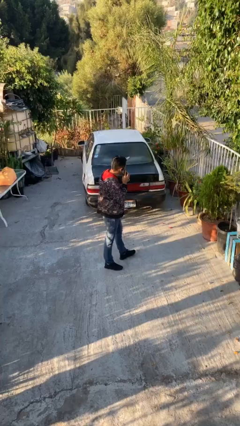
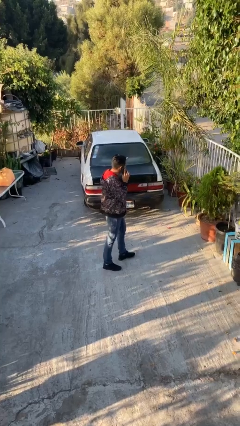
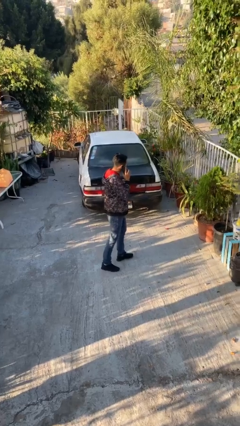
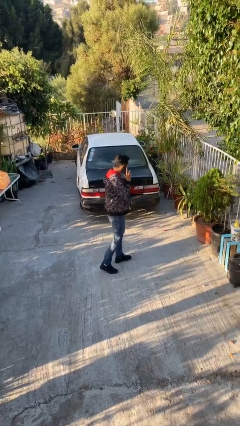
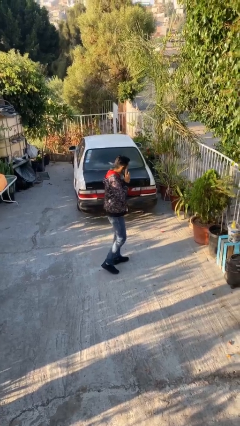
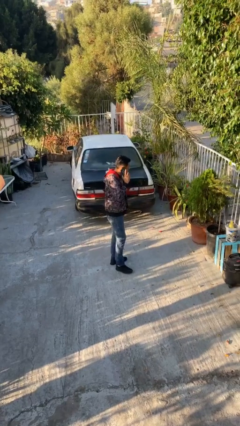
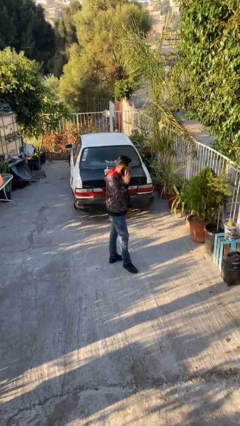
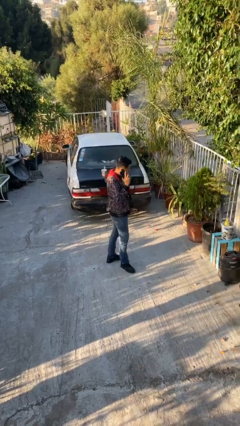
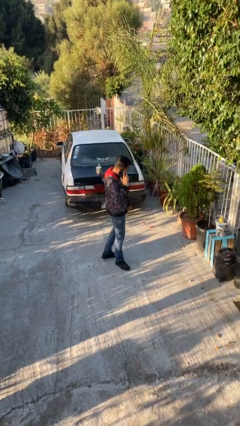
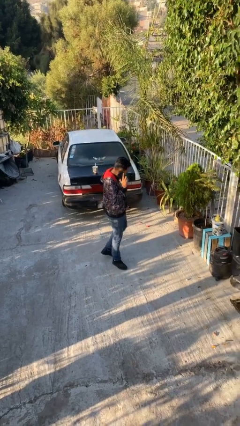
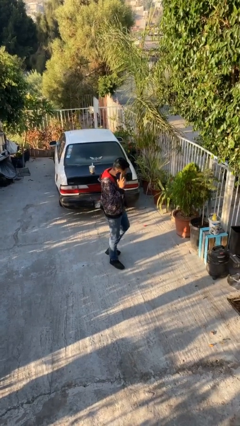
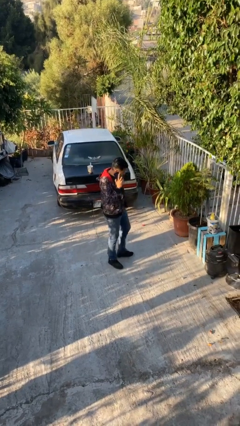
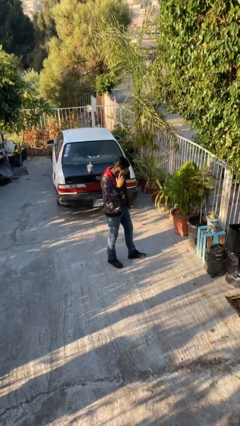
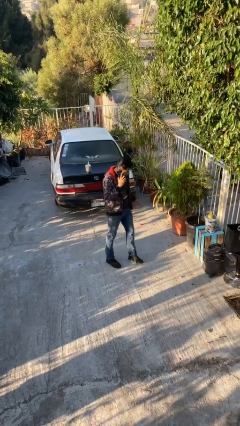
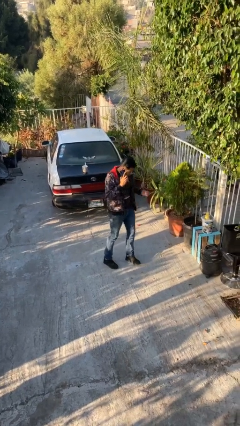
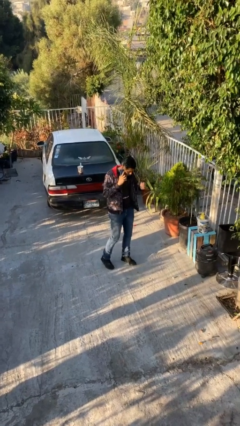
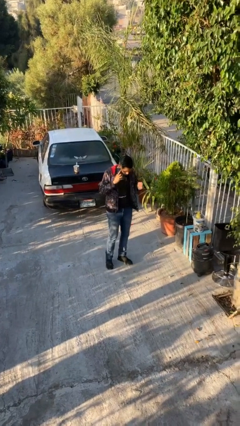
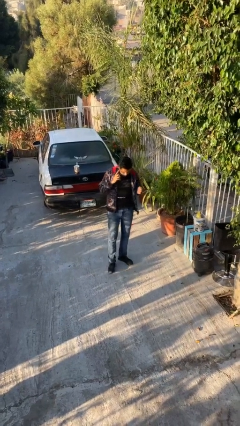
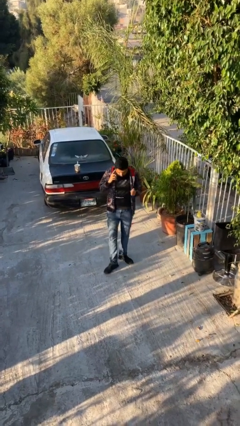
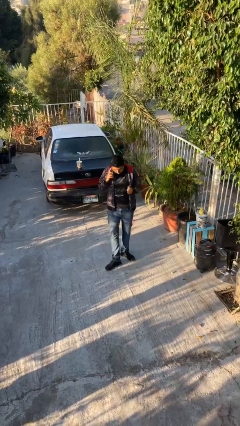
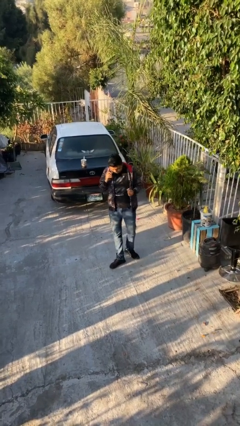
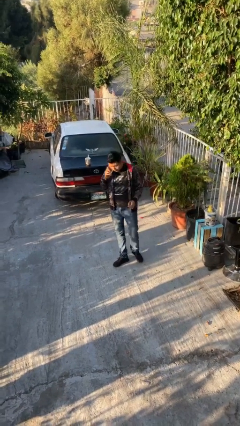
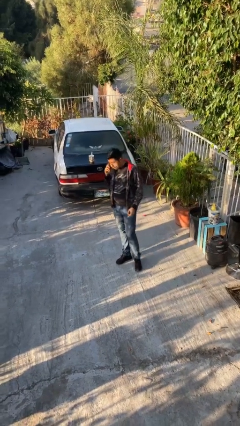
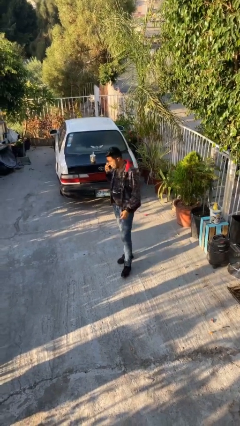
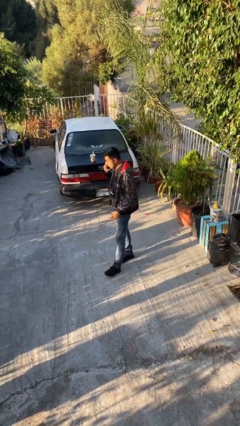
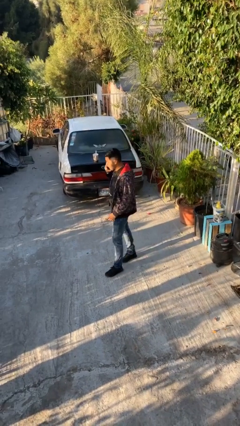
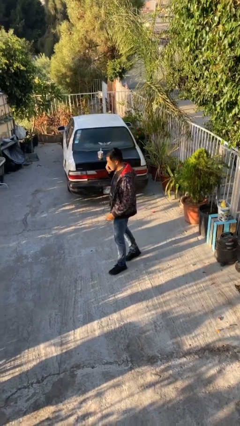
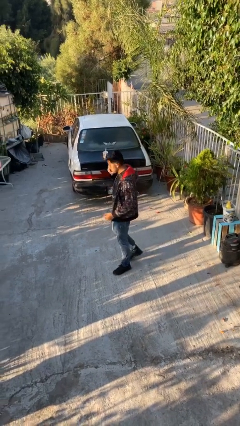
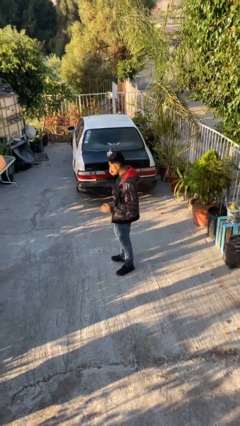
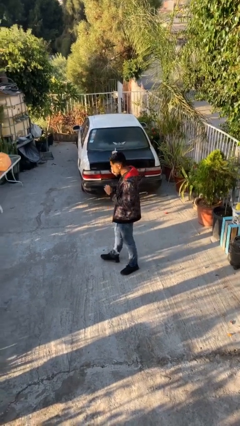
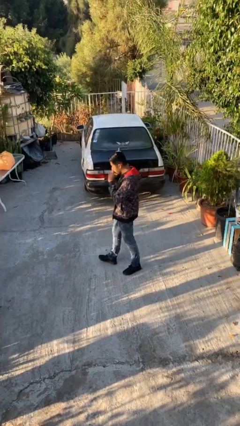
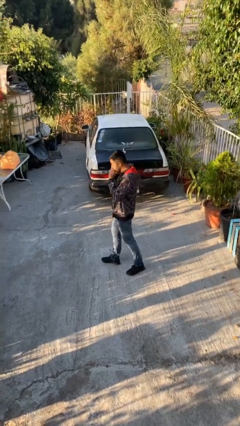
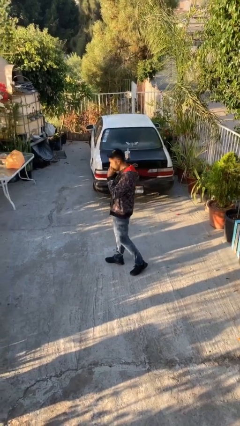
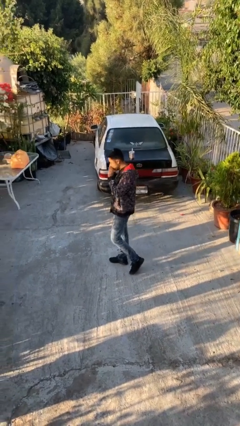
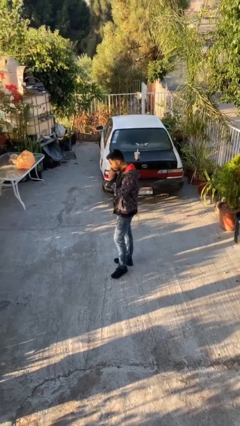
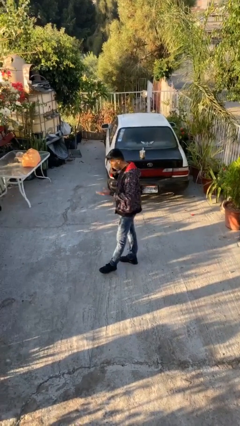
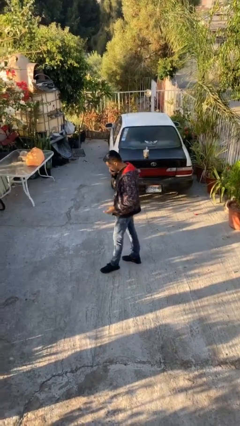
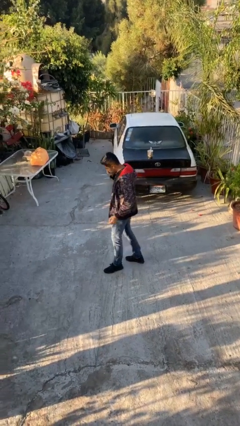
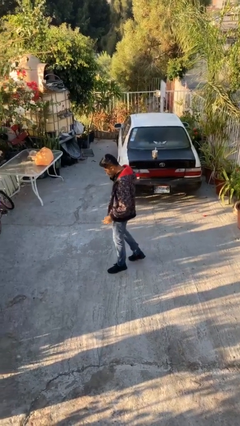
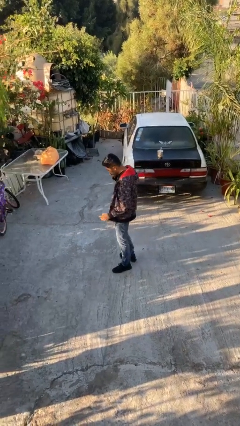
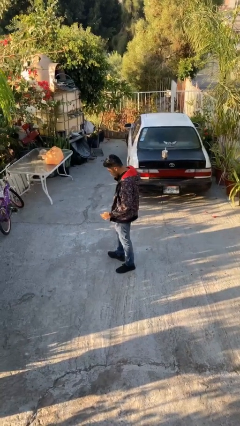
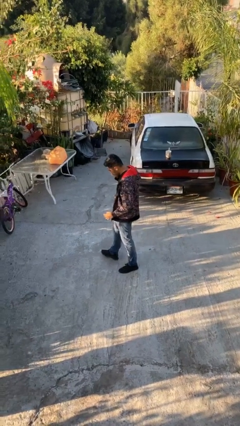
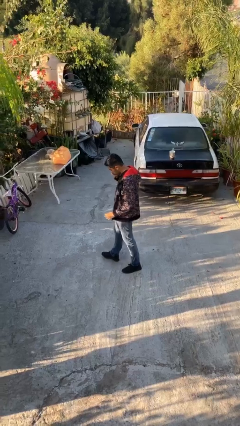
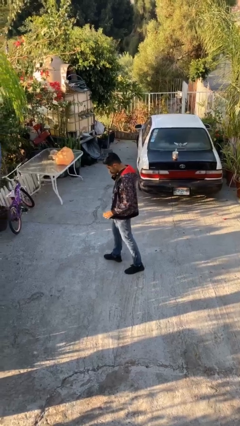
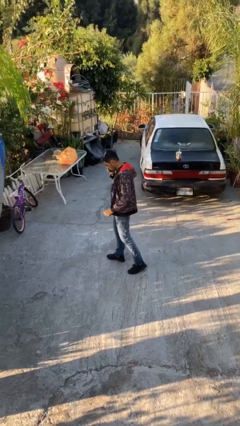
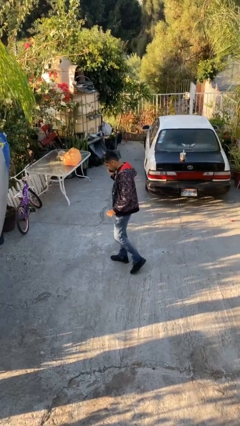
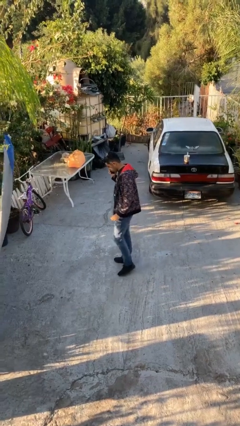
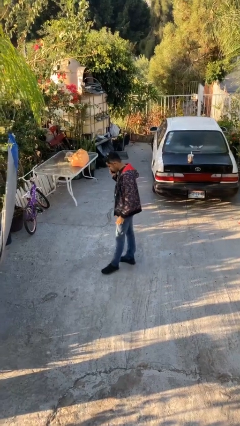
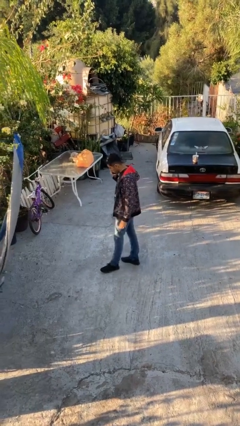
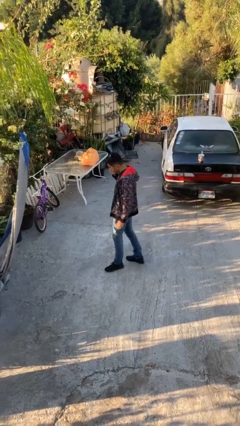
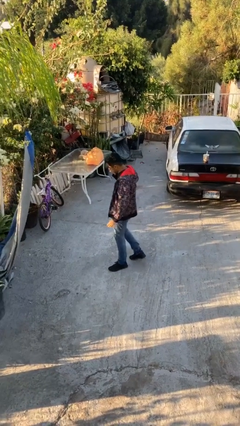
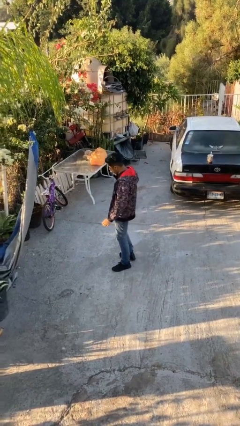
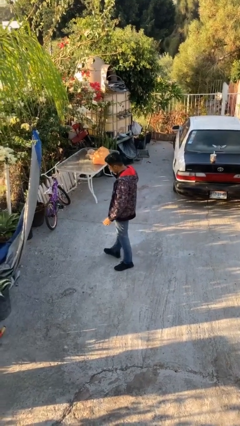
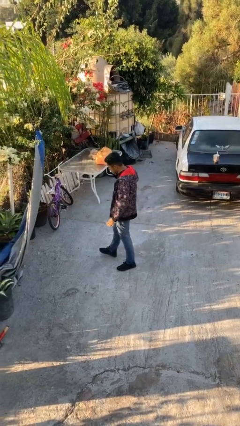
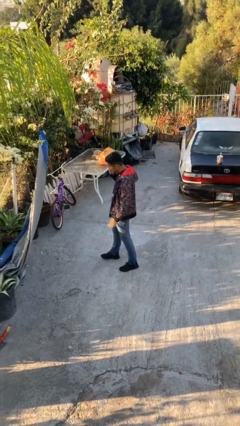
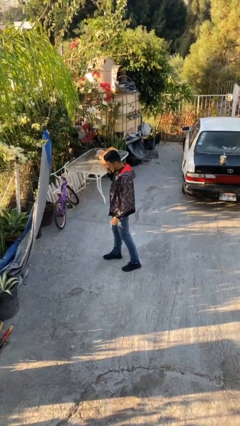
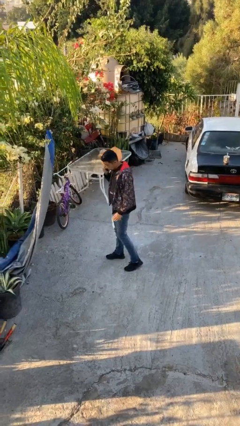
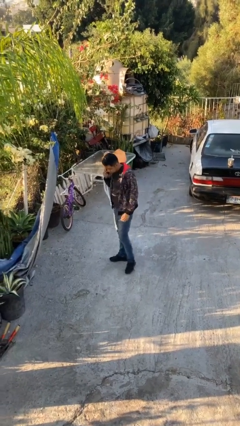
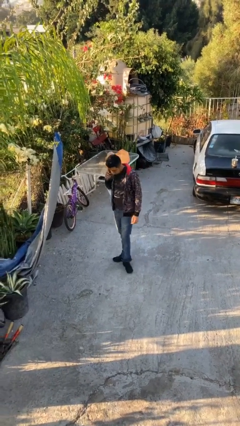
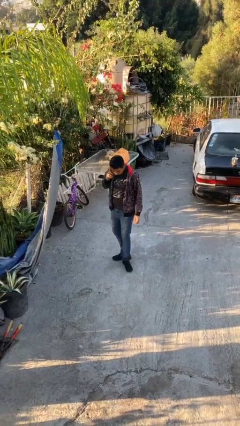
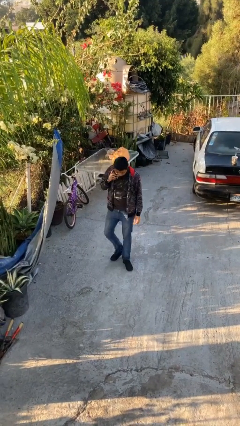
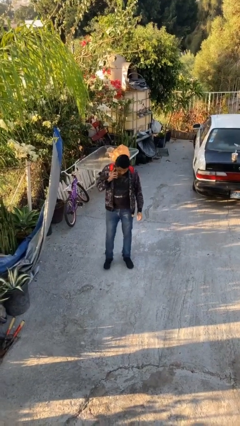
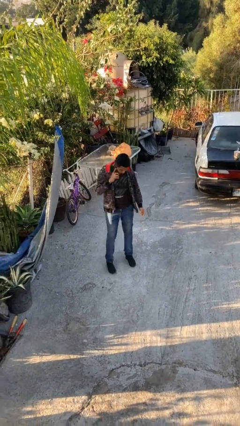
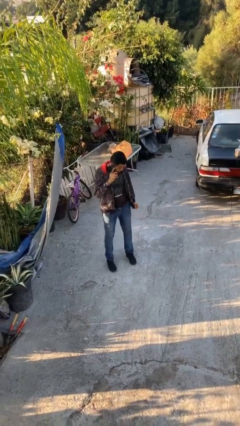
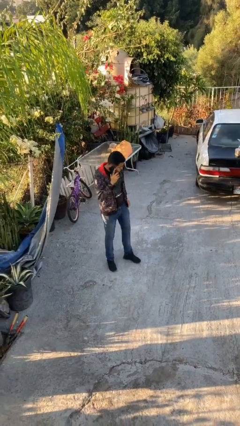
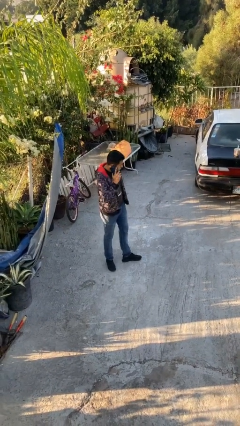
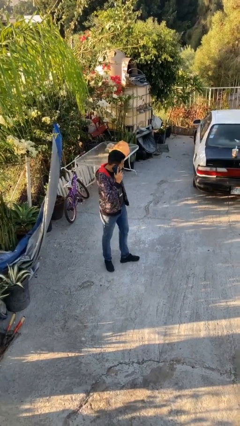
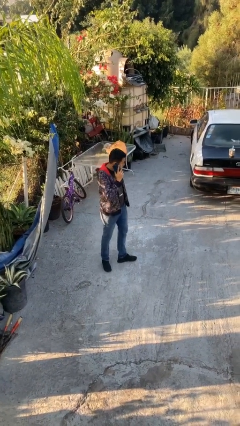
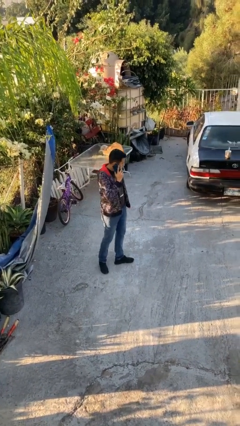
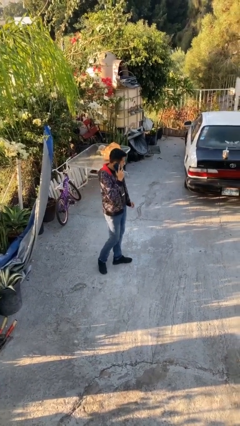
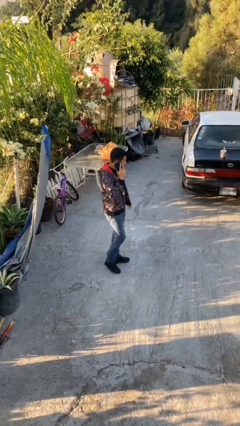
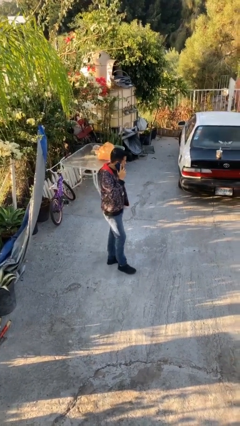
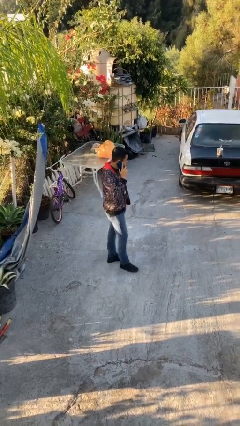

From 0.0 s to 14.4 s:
person talks on phone

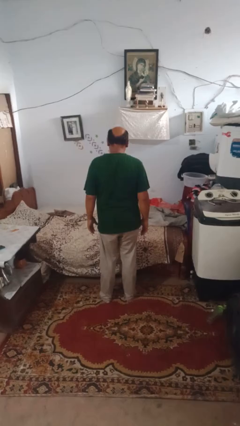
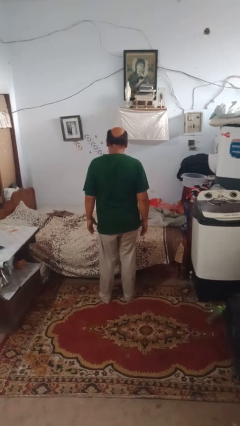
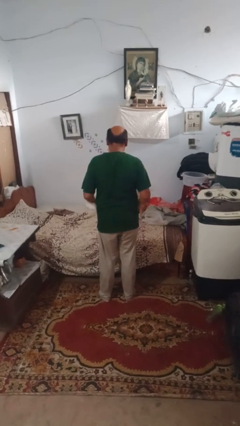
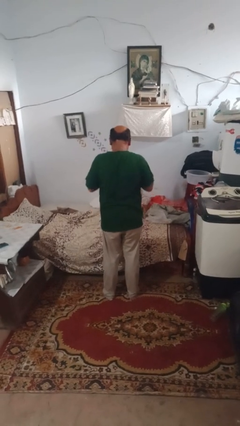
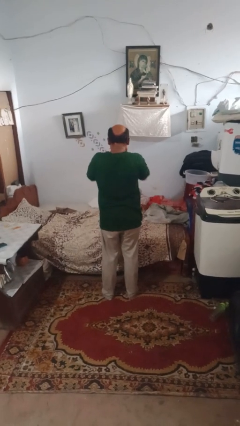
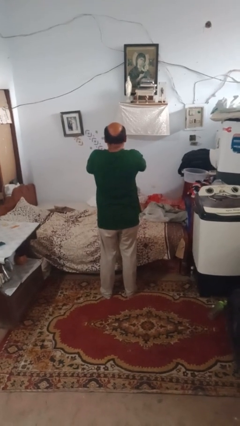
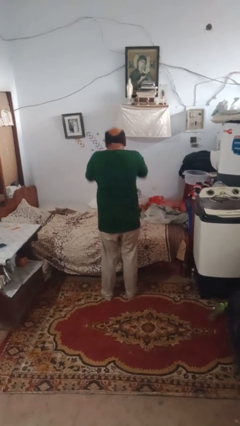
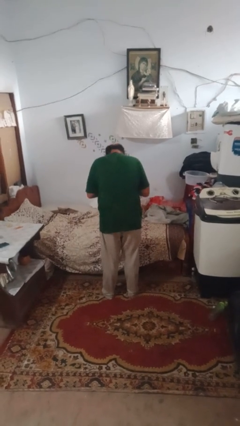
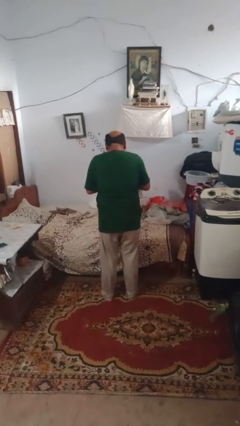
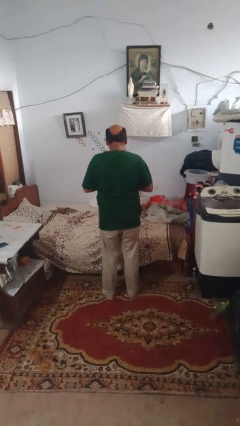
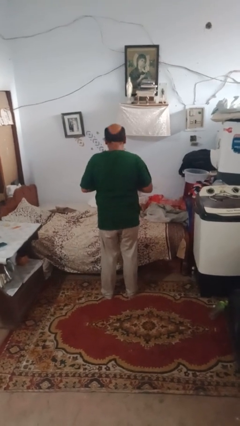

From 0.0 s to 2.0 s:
person sneezes into hand

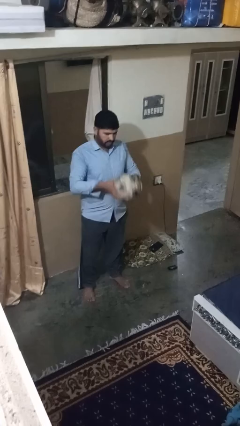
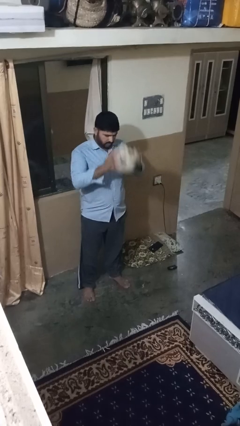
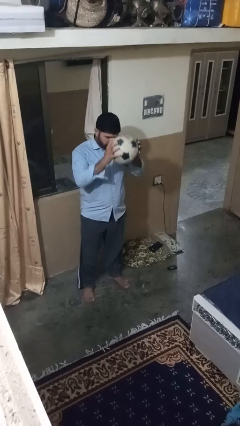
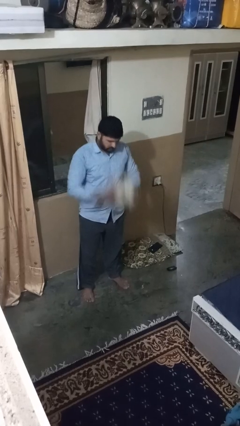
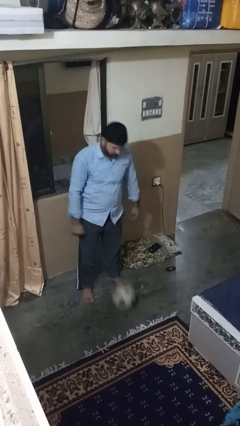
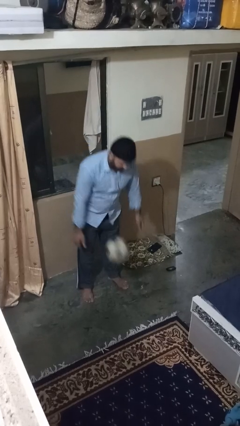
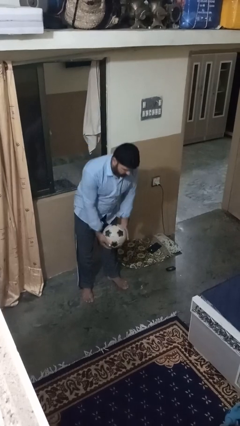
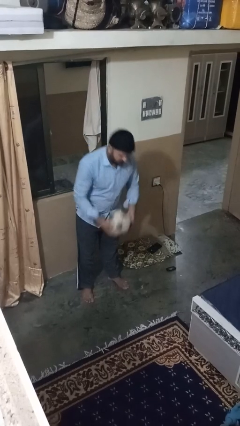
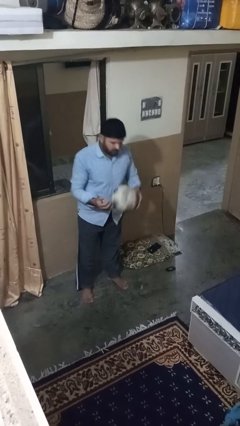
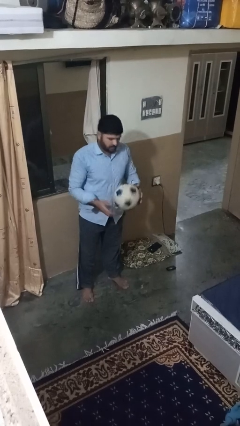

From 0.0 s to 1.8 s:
person bounces ball on floor
